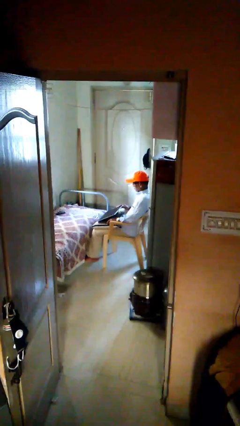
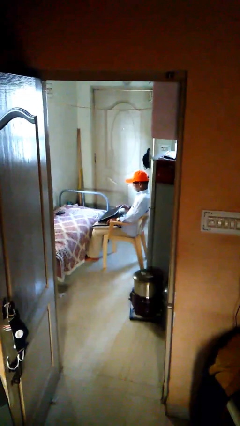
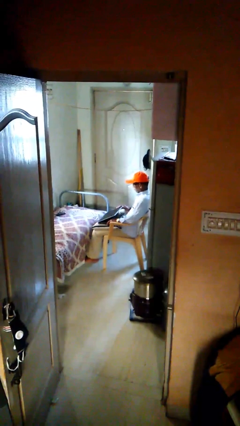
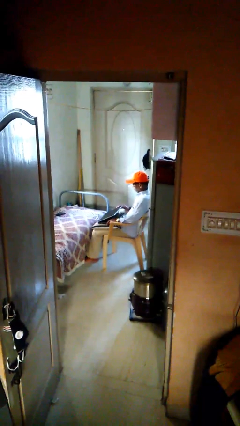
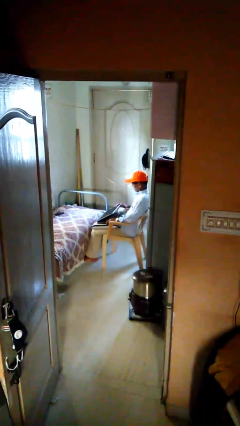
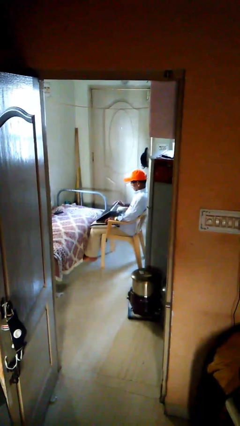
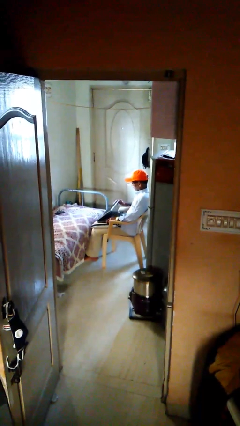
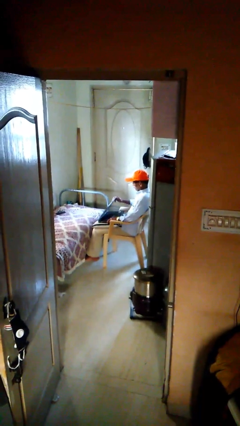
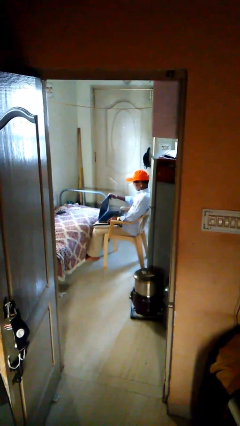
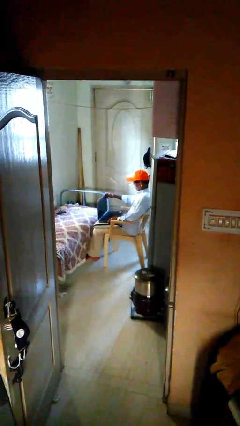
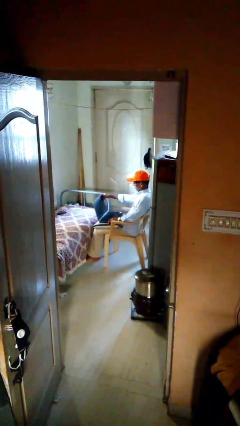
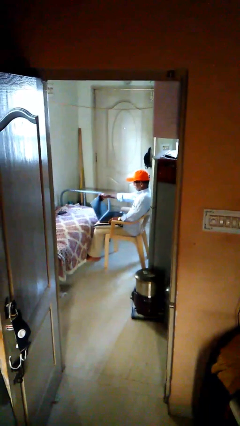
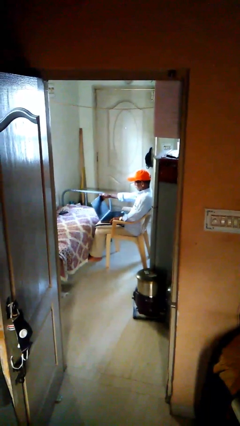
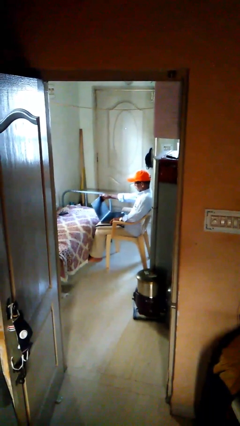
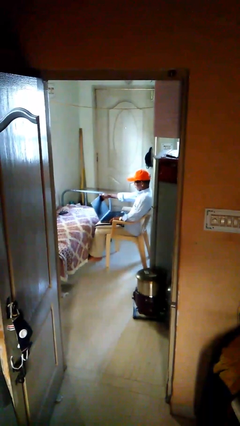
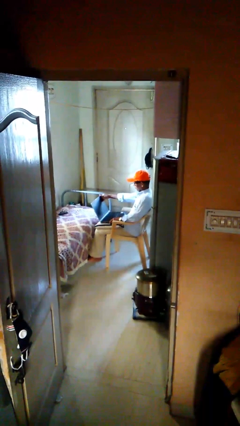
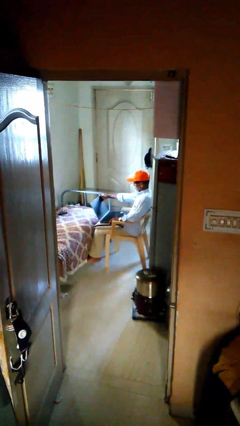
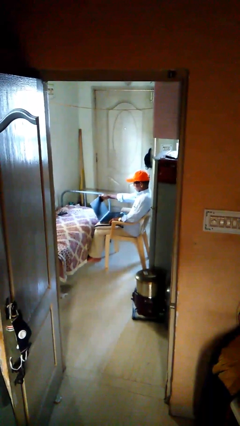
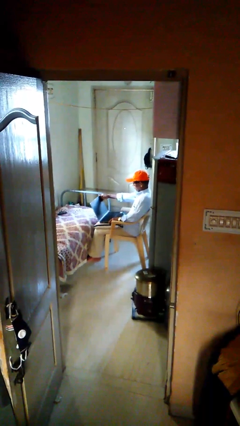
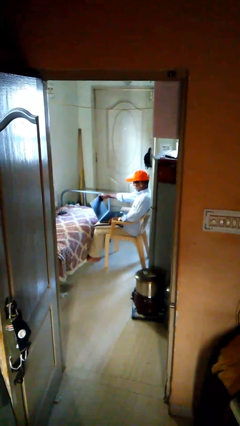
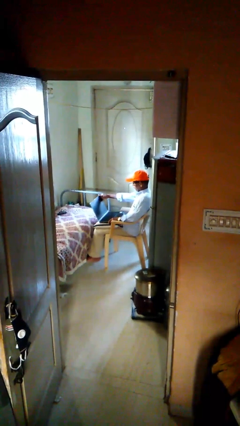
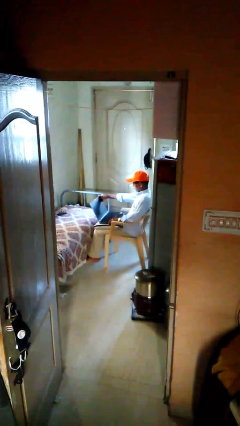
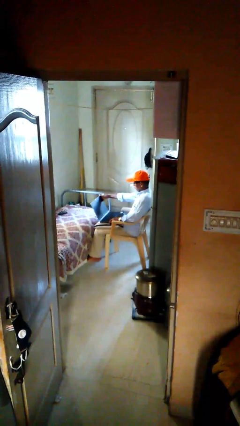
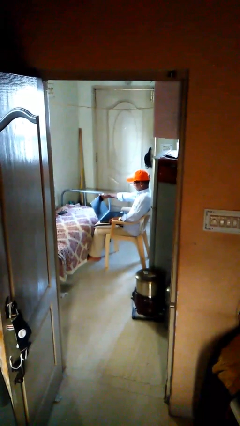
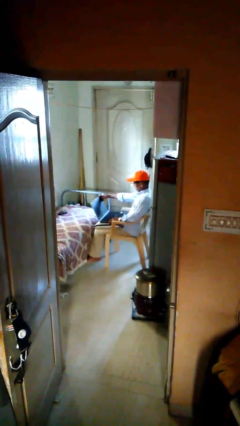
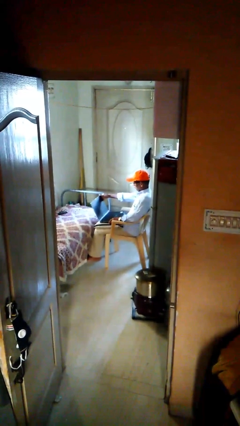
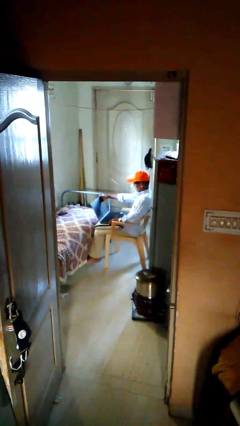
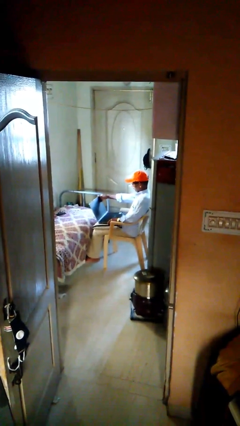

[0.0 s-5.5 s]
person interacts with laptop

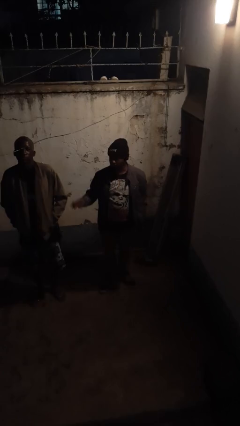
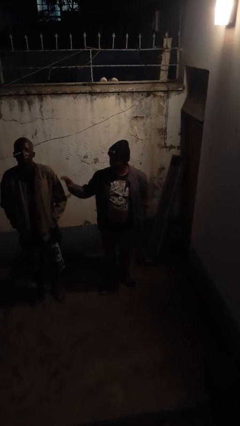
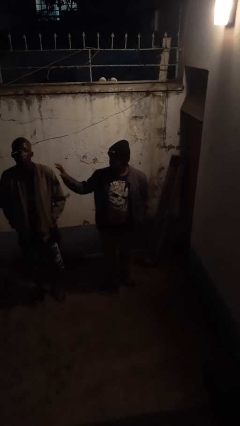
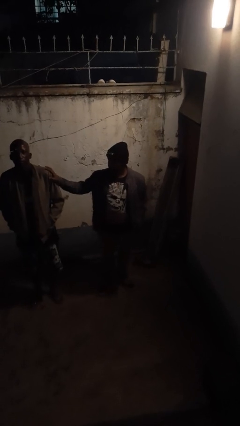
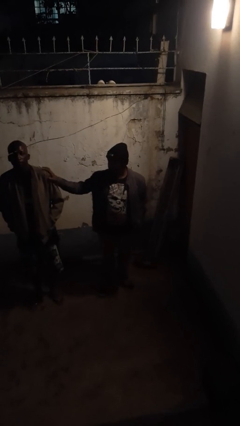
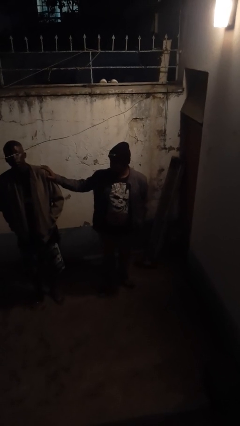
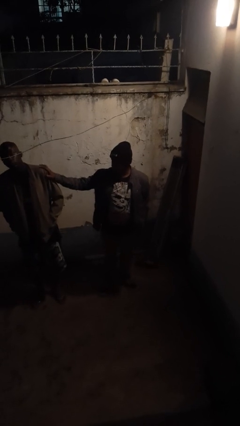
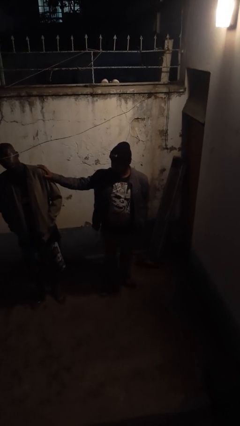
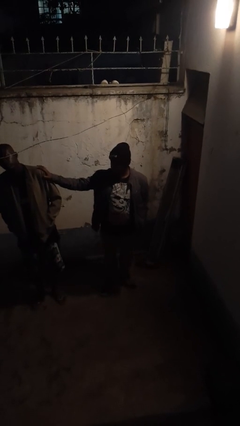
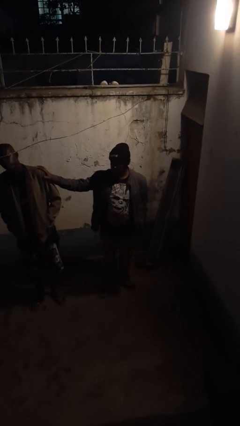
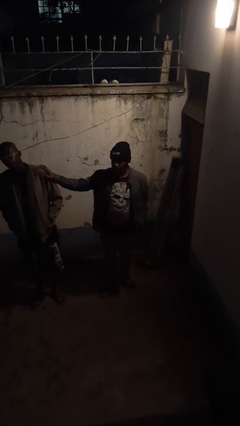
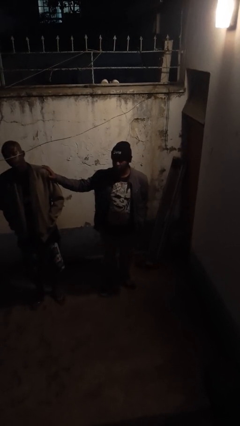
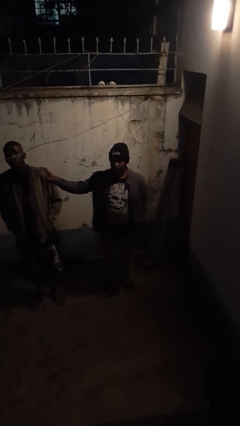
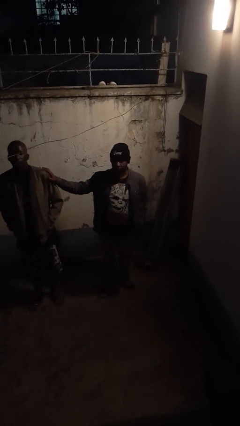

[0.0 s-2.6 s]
person shoves person

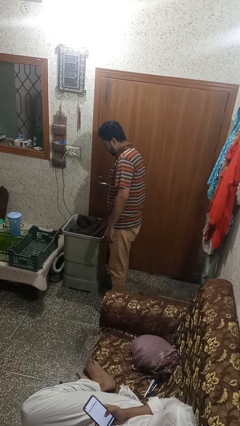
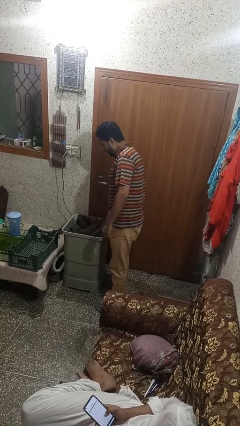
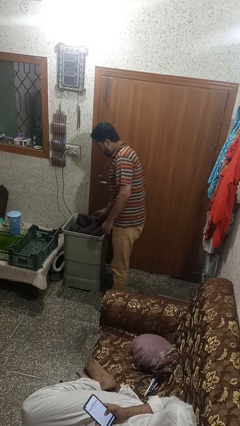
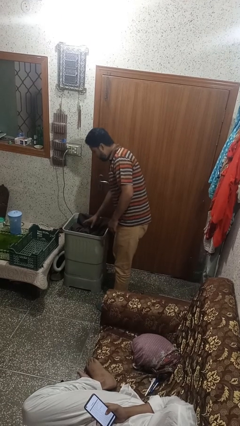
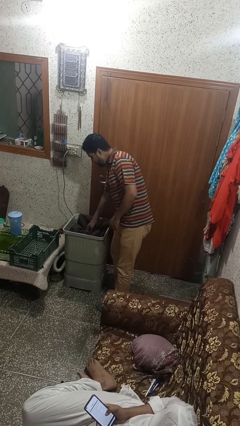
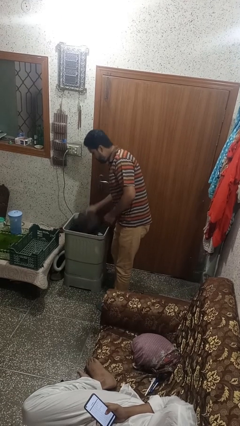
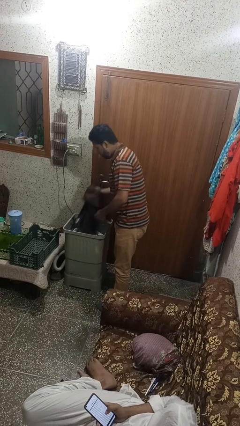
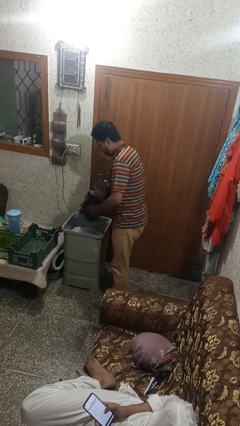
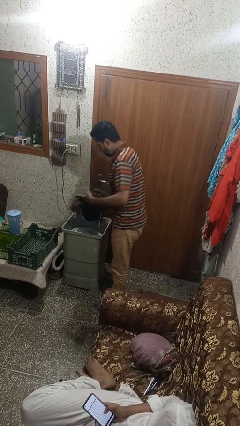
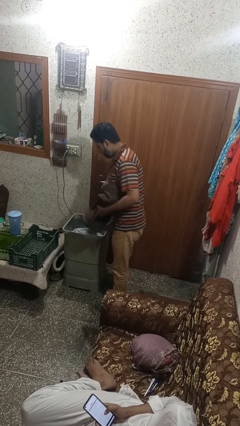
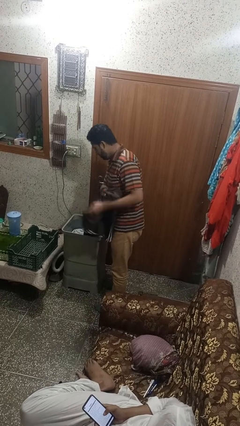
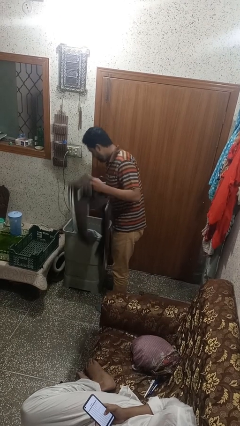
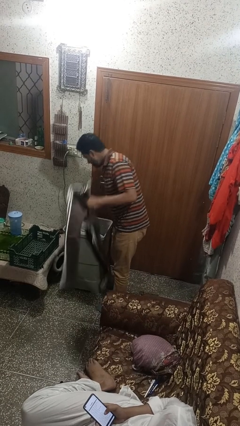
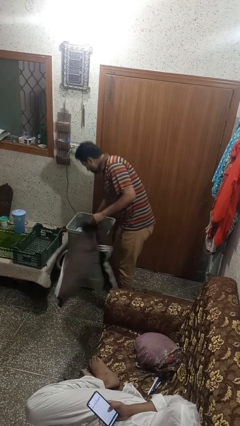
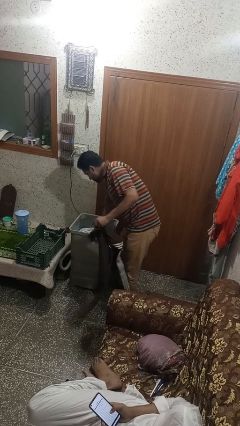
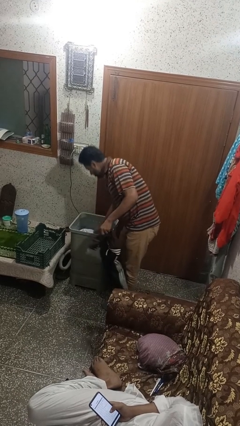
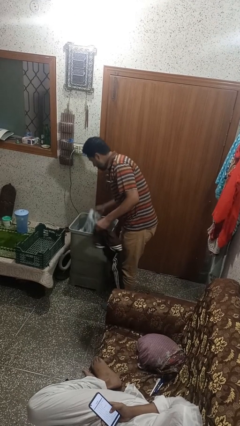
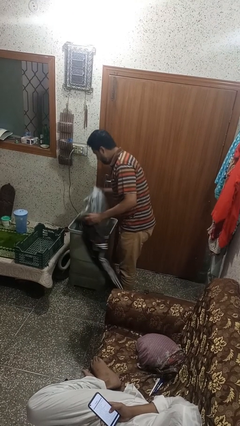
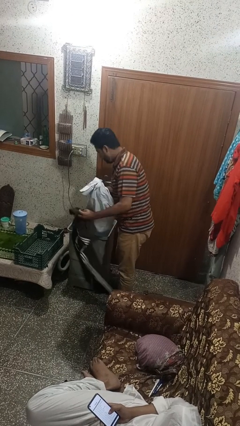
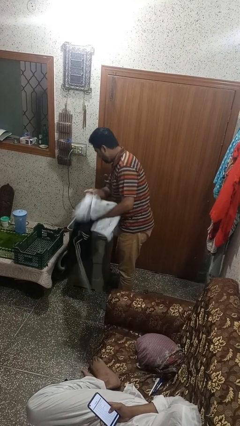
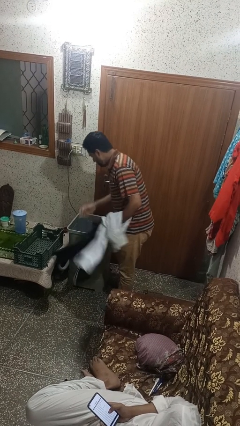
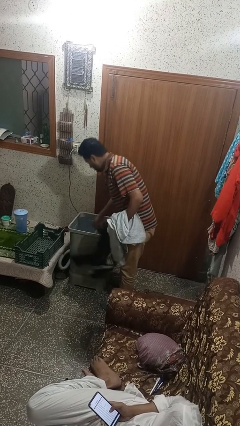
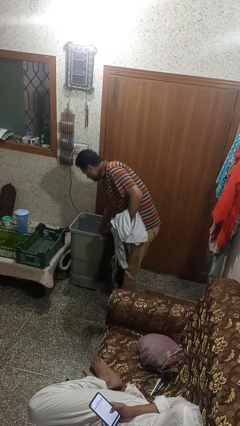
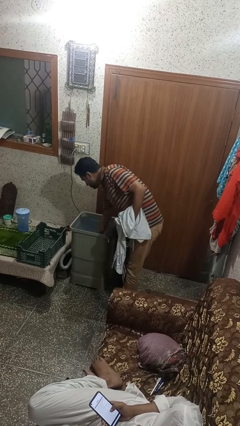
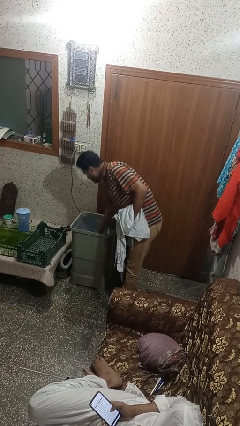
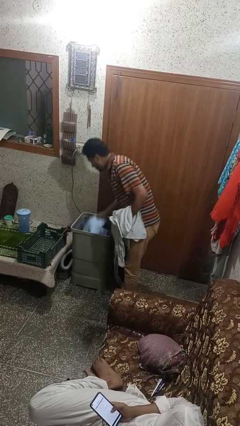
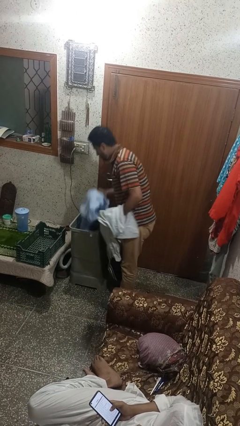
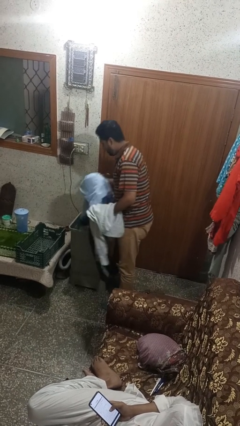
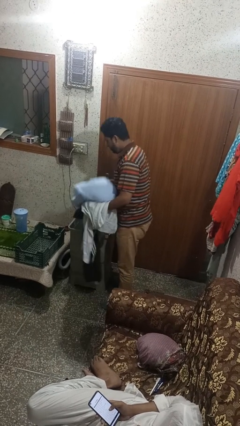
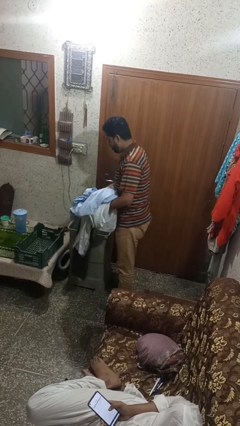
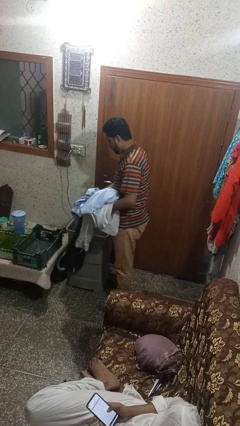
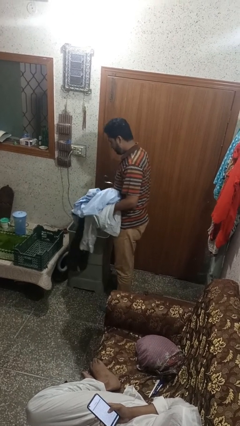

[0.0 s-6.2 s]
person unloads dryer

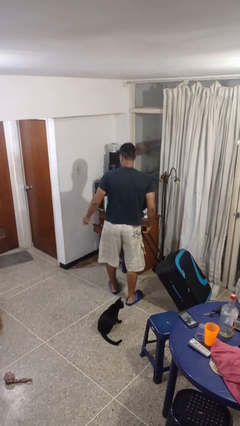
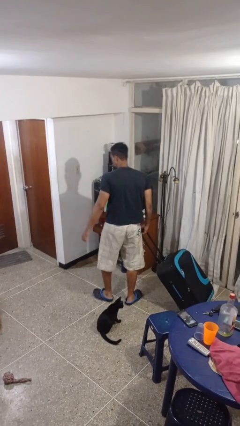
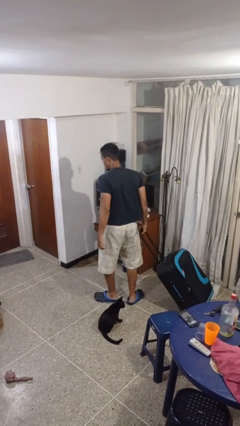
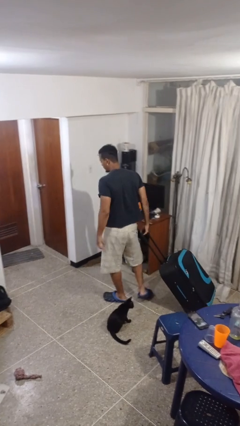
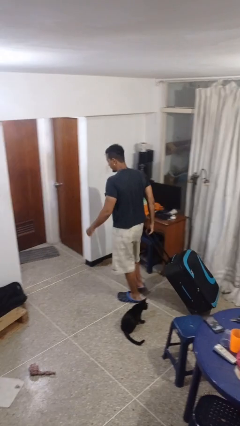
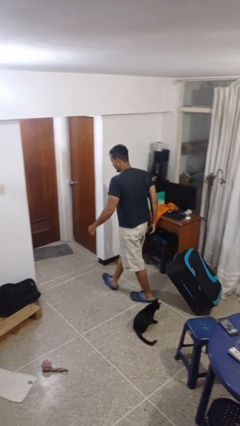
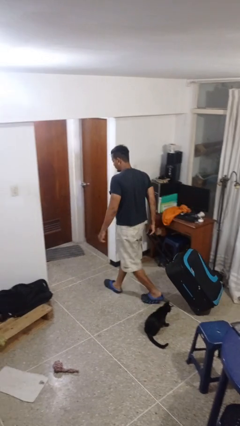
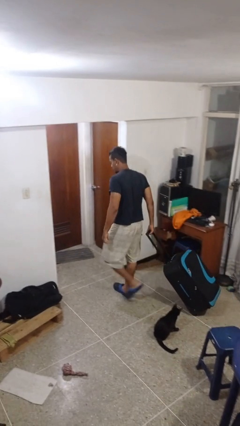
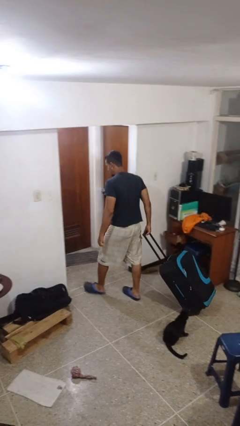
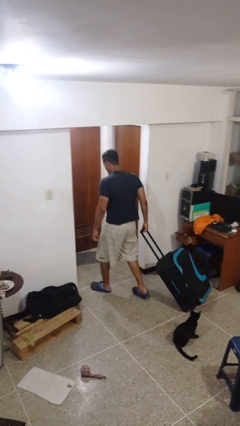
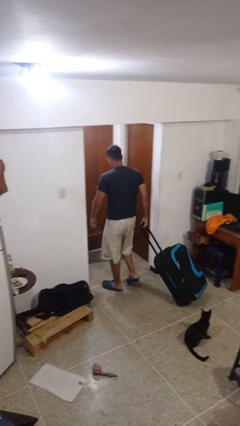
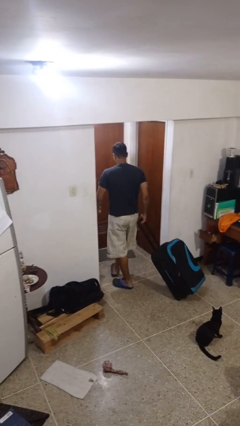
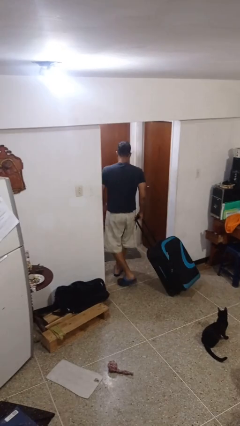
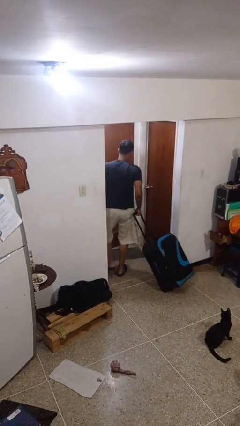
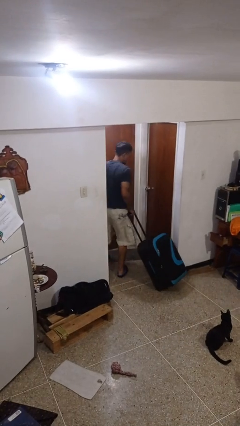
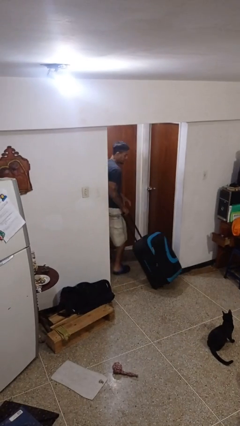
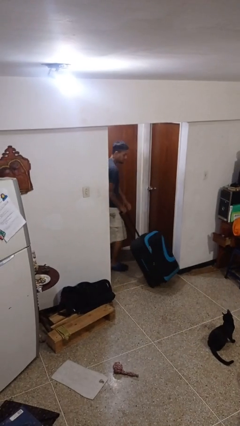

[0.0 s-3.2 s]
person pulls wheeled cart

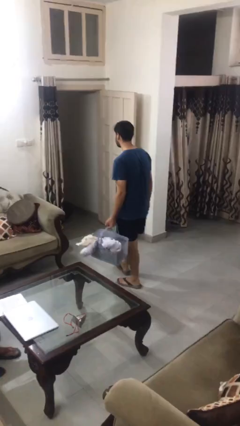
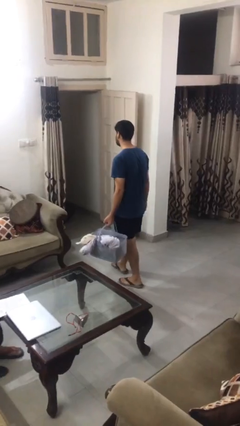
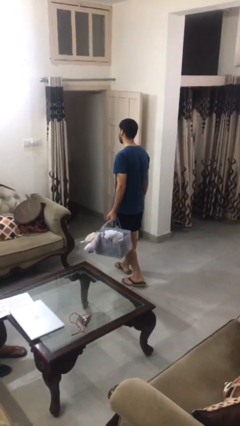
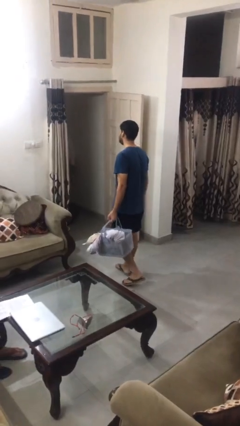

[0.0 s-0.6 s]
person carries laundry basket
